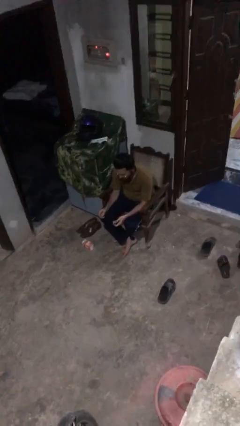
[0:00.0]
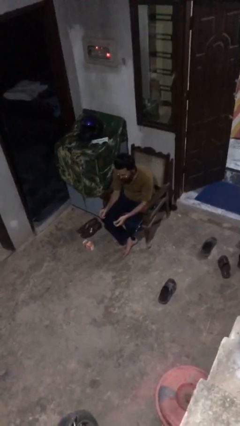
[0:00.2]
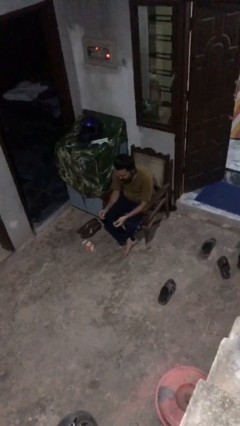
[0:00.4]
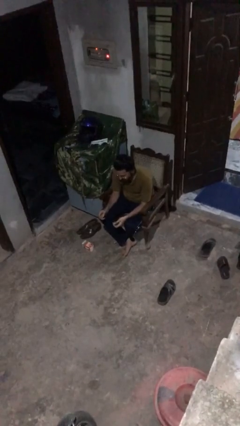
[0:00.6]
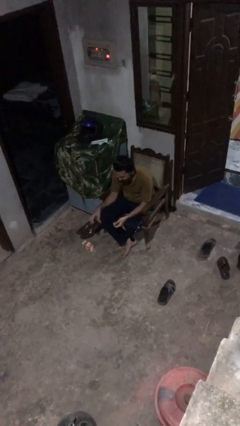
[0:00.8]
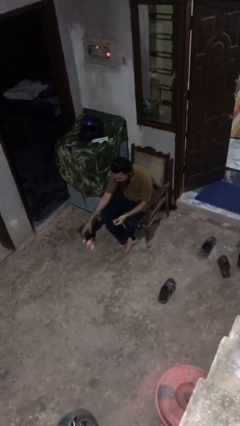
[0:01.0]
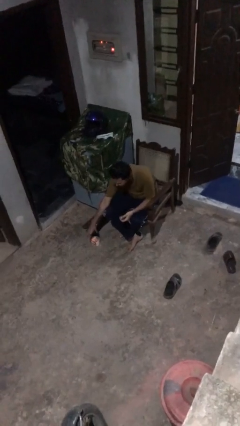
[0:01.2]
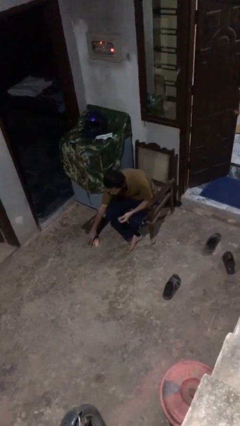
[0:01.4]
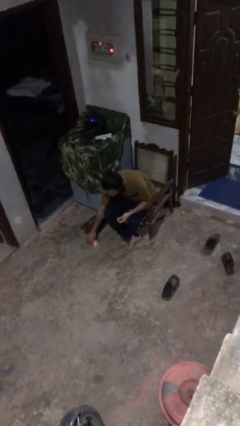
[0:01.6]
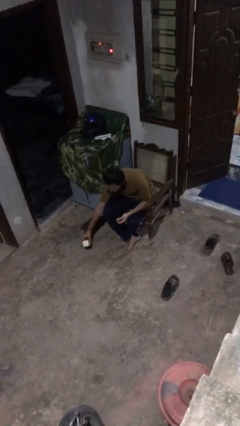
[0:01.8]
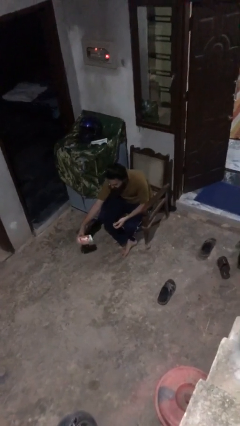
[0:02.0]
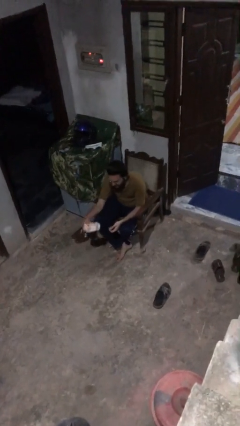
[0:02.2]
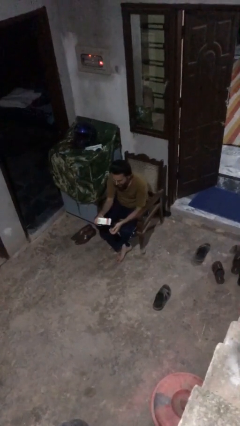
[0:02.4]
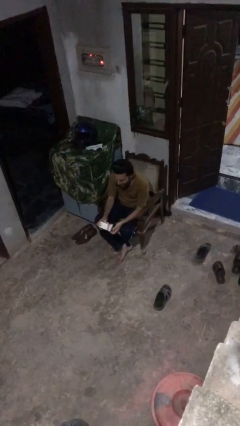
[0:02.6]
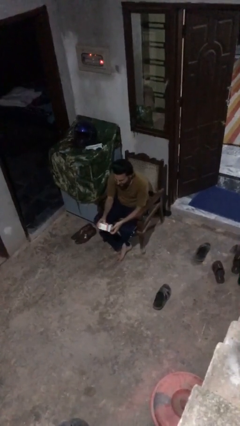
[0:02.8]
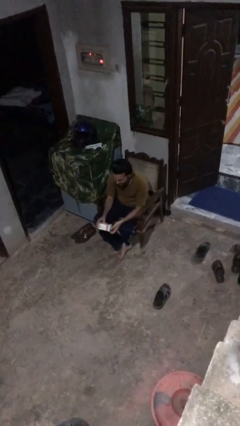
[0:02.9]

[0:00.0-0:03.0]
person picks up object from floor

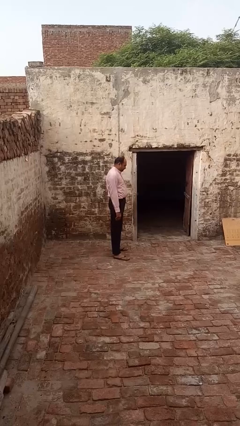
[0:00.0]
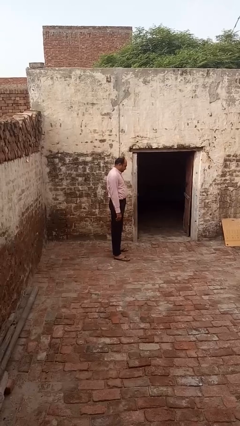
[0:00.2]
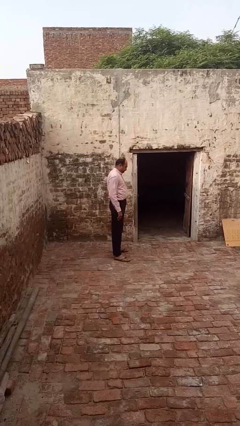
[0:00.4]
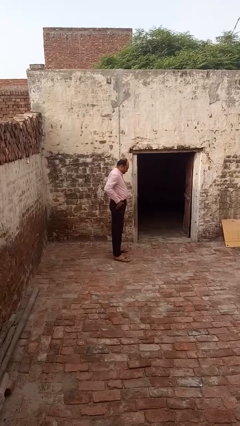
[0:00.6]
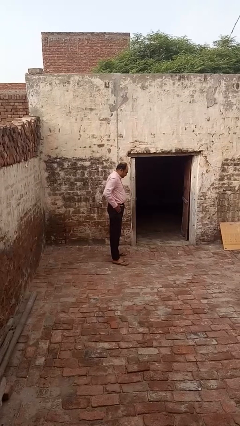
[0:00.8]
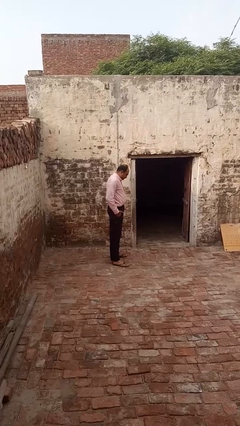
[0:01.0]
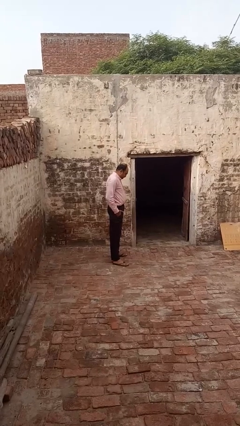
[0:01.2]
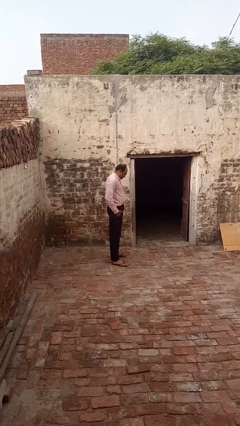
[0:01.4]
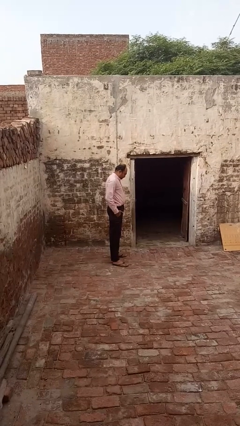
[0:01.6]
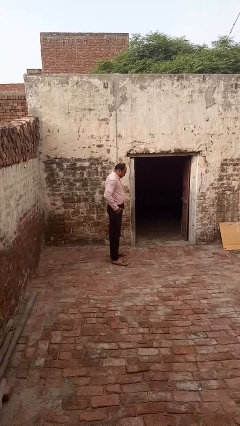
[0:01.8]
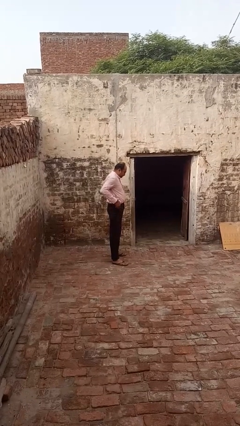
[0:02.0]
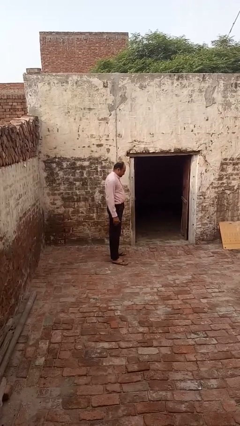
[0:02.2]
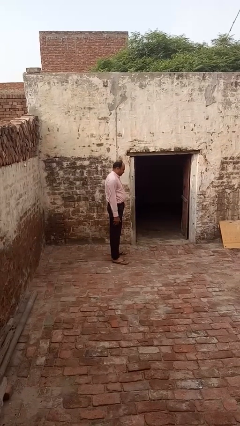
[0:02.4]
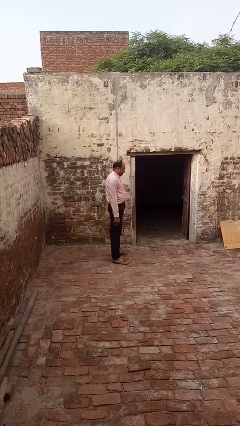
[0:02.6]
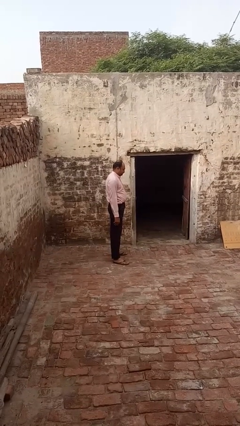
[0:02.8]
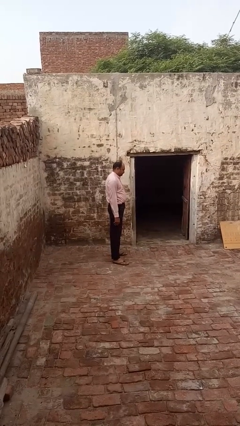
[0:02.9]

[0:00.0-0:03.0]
person puts hands in back pockets

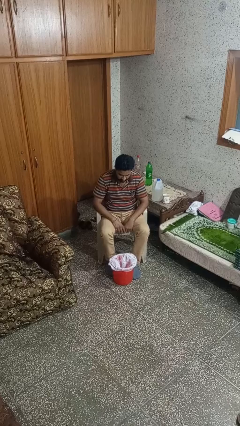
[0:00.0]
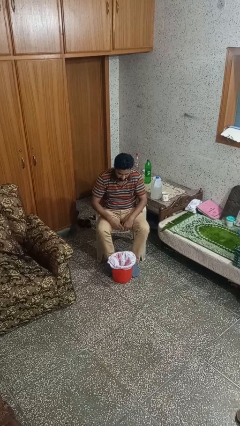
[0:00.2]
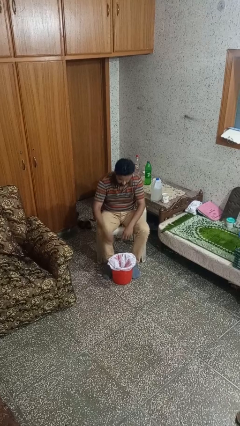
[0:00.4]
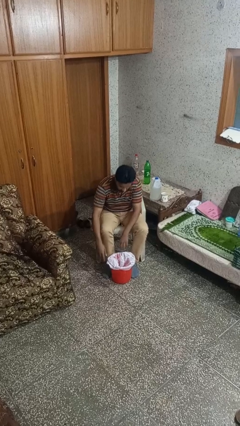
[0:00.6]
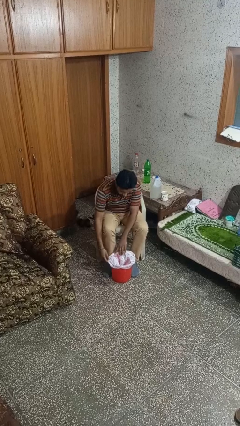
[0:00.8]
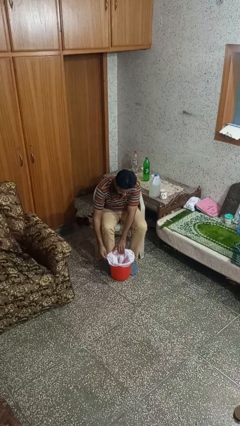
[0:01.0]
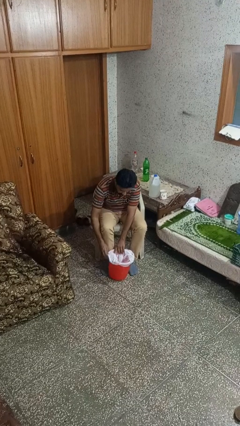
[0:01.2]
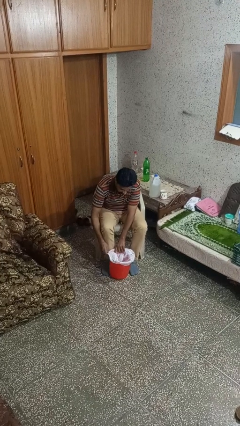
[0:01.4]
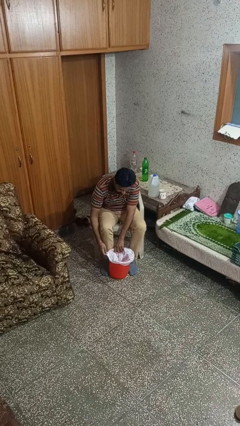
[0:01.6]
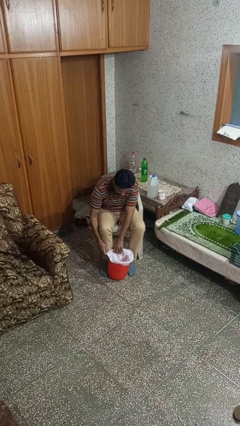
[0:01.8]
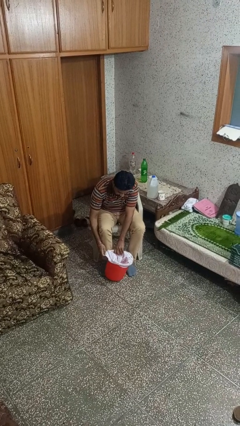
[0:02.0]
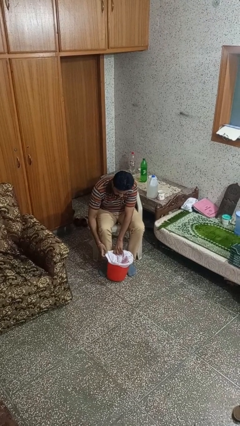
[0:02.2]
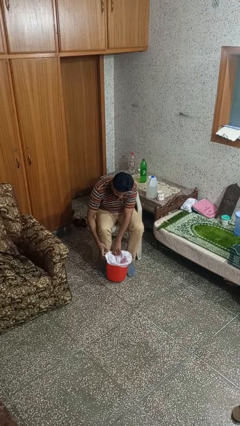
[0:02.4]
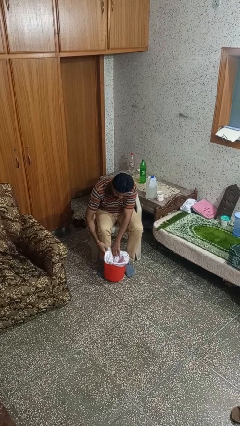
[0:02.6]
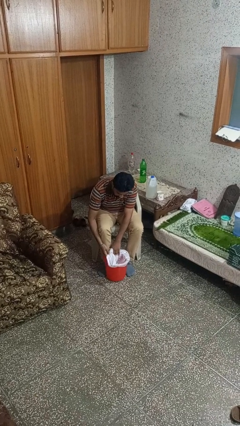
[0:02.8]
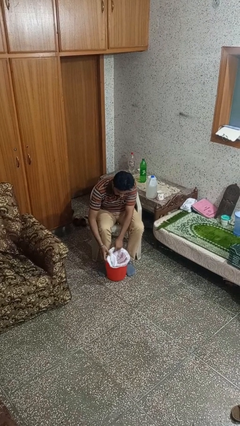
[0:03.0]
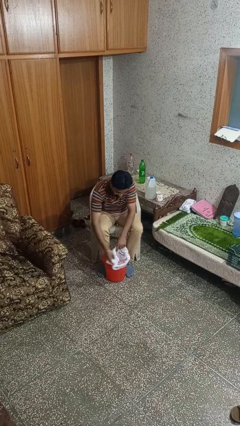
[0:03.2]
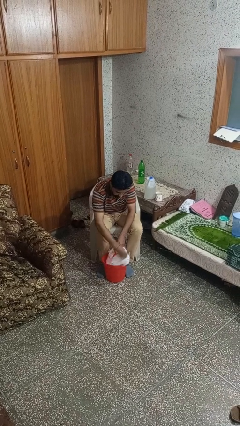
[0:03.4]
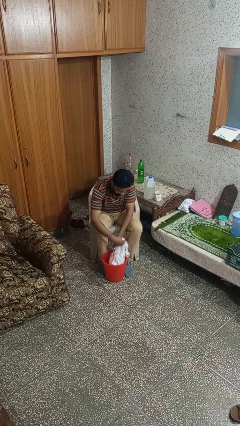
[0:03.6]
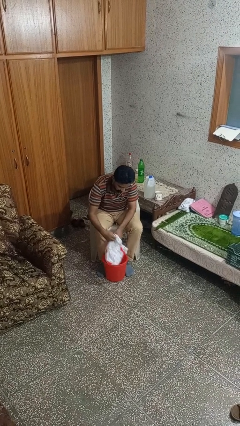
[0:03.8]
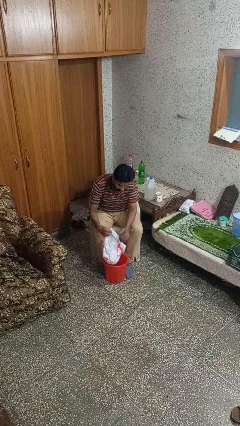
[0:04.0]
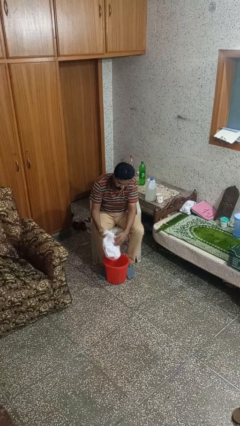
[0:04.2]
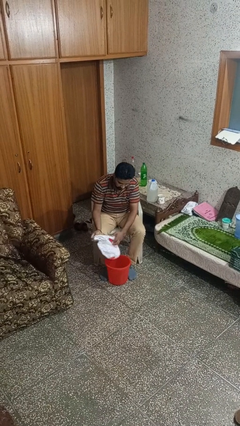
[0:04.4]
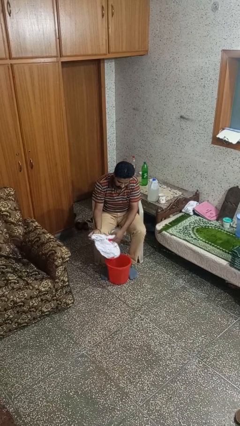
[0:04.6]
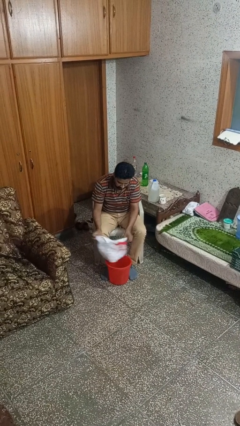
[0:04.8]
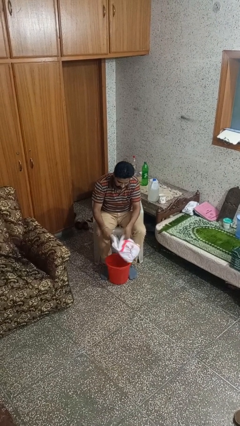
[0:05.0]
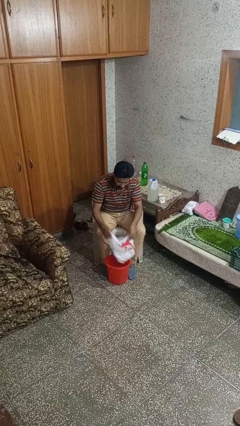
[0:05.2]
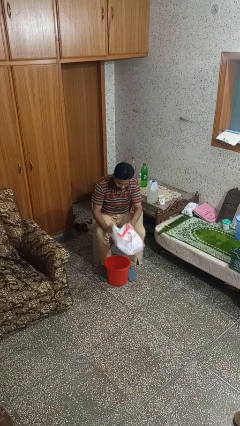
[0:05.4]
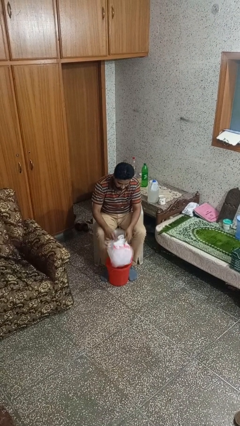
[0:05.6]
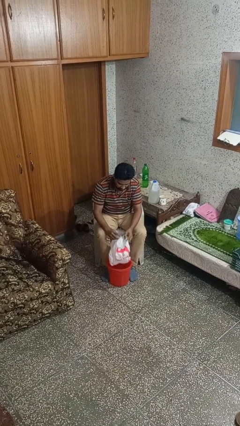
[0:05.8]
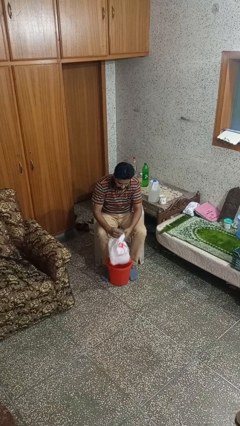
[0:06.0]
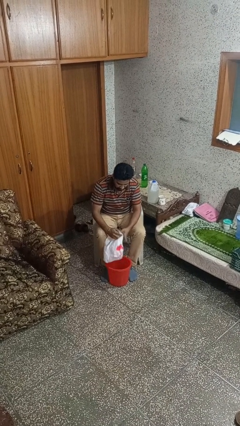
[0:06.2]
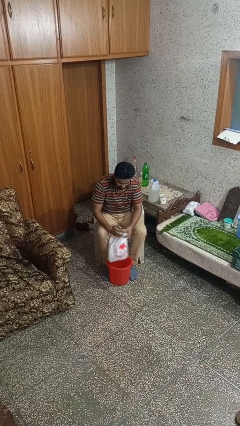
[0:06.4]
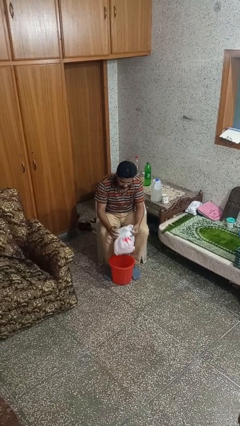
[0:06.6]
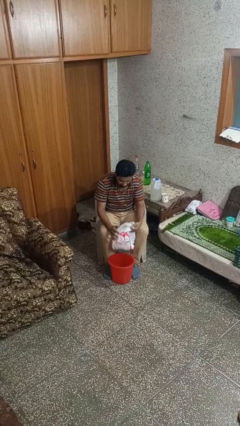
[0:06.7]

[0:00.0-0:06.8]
person removes trashbag from trashcan

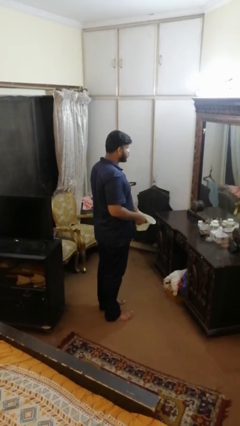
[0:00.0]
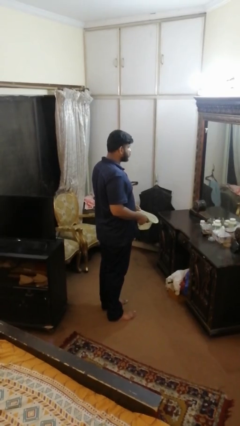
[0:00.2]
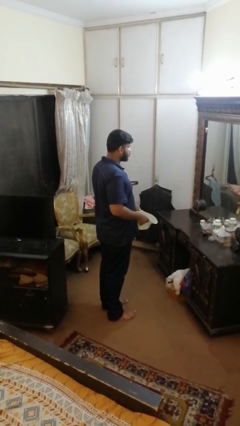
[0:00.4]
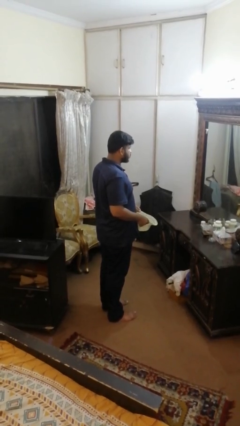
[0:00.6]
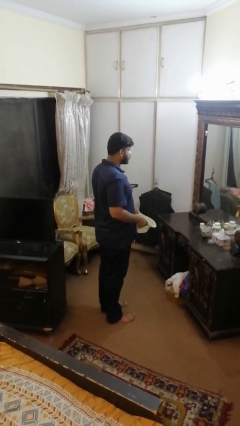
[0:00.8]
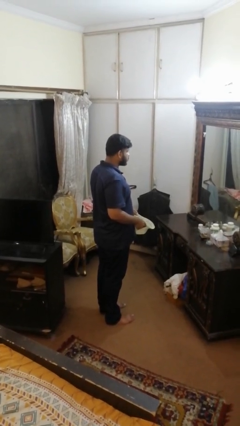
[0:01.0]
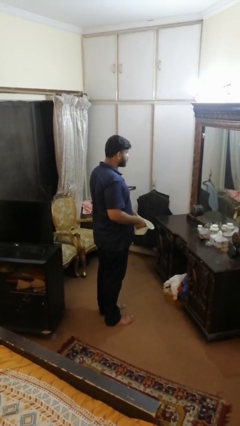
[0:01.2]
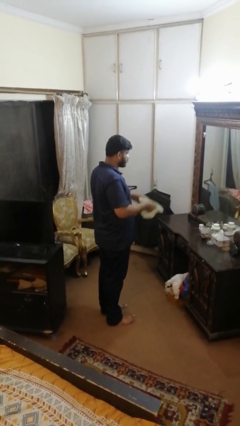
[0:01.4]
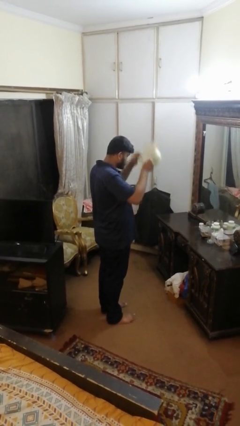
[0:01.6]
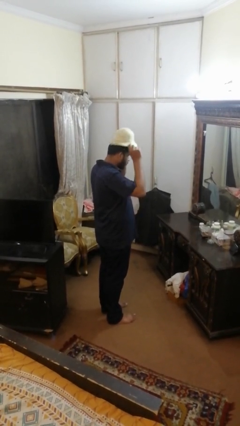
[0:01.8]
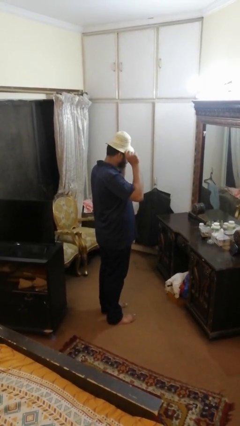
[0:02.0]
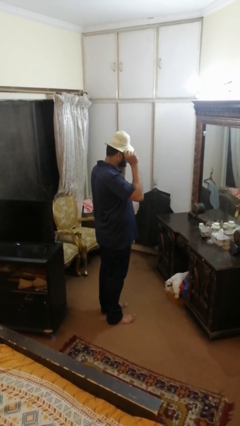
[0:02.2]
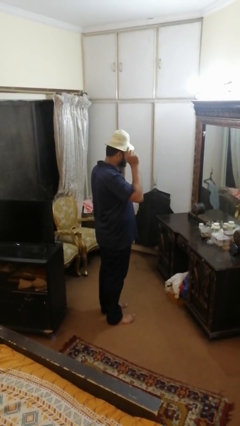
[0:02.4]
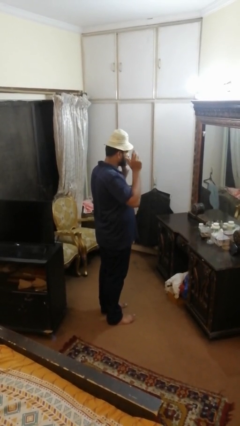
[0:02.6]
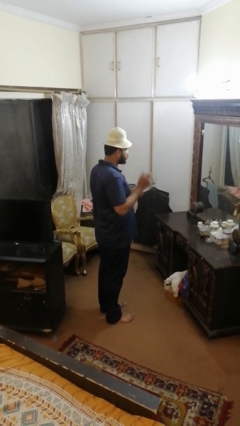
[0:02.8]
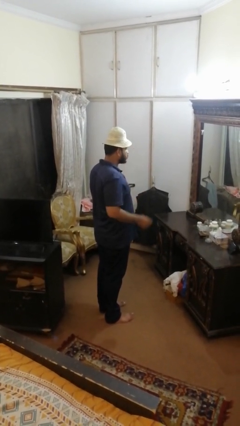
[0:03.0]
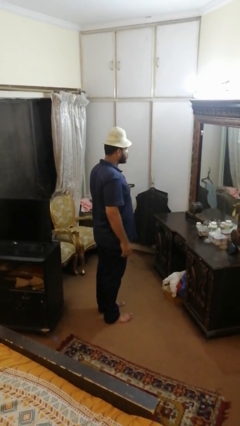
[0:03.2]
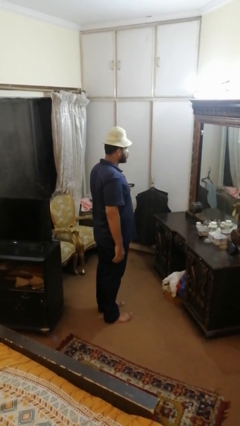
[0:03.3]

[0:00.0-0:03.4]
person puts on hat

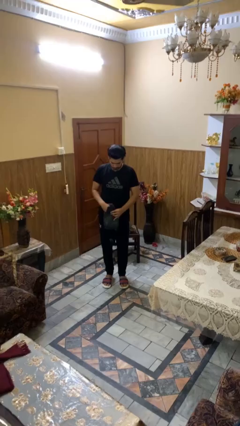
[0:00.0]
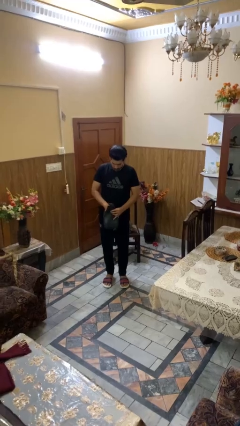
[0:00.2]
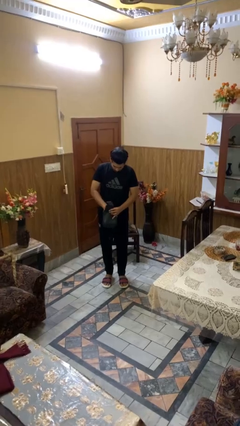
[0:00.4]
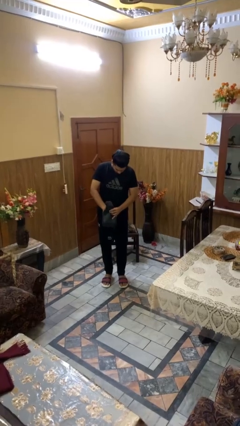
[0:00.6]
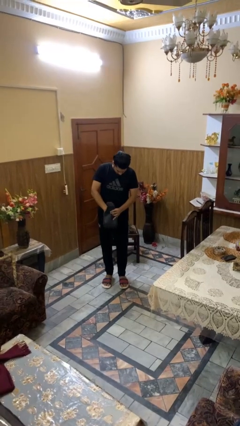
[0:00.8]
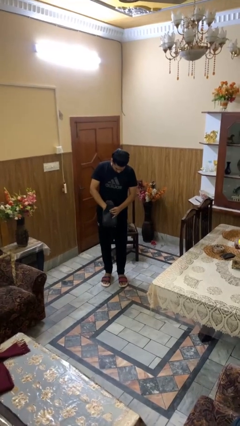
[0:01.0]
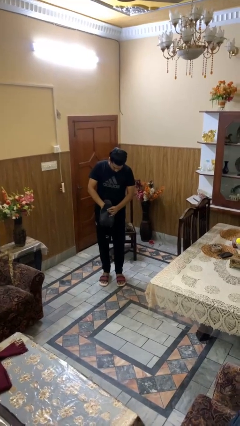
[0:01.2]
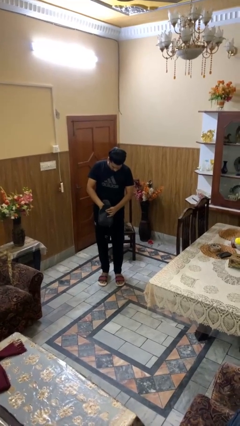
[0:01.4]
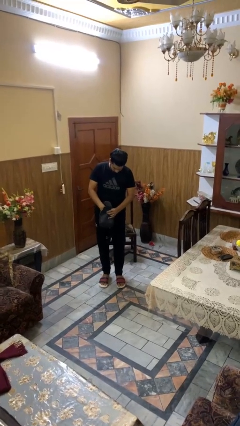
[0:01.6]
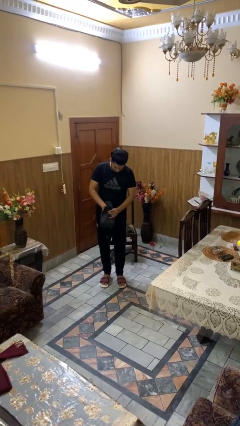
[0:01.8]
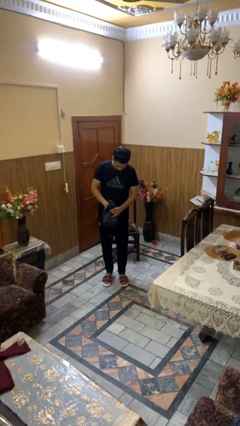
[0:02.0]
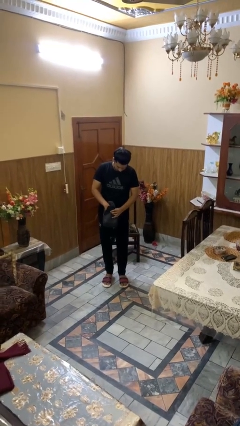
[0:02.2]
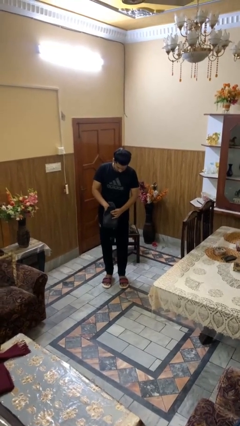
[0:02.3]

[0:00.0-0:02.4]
person searches in purse
